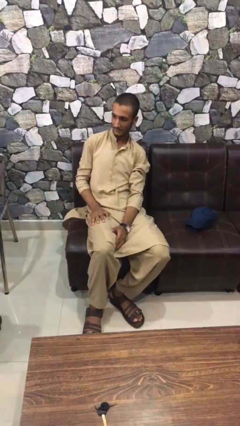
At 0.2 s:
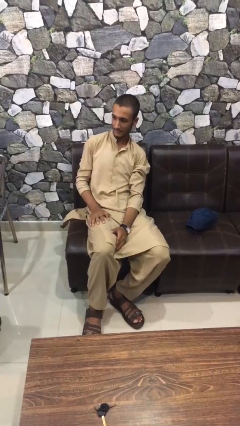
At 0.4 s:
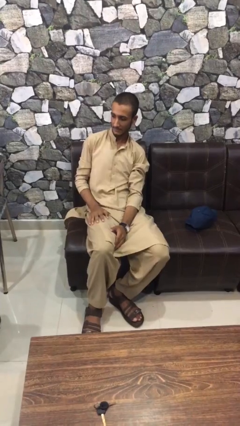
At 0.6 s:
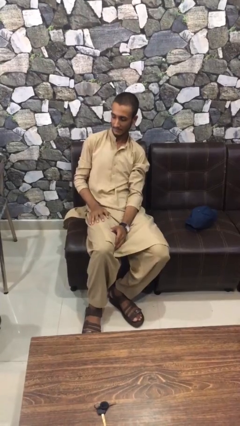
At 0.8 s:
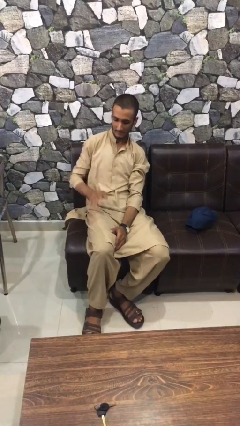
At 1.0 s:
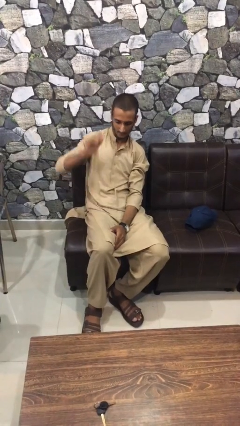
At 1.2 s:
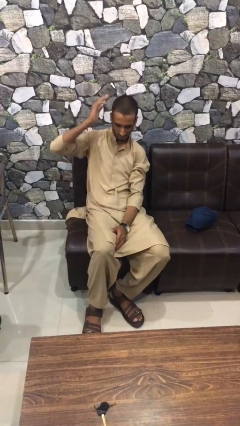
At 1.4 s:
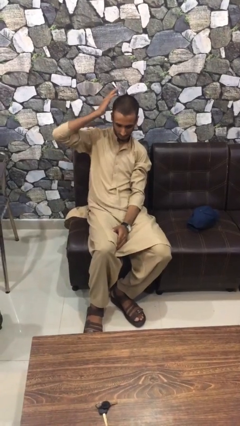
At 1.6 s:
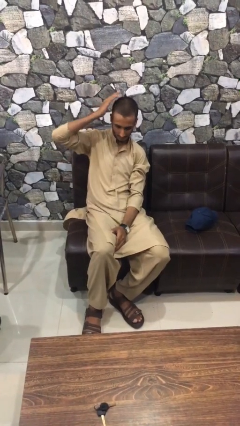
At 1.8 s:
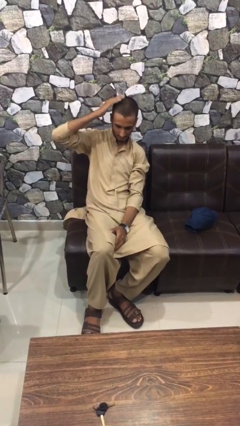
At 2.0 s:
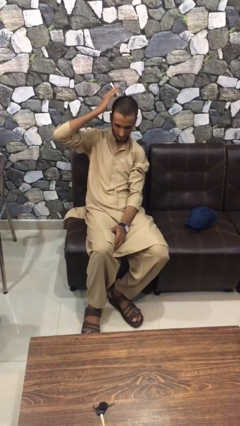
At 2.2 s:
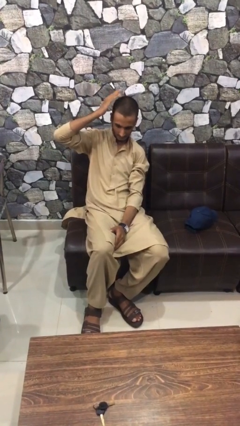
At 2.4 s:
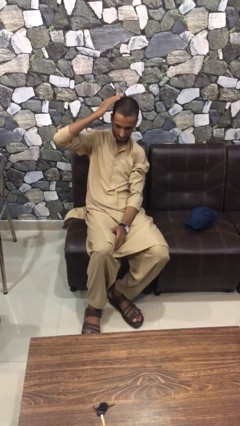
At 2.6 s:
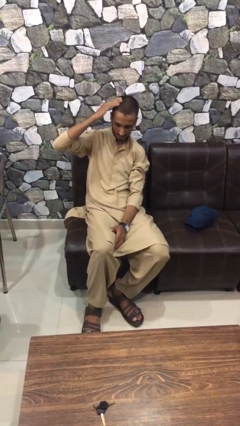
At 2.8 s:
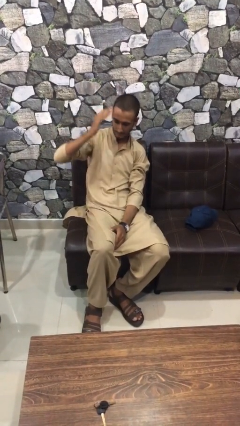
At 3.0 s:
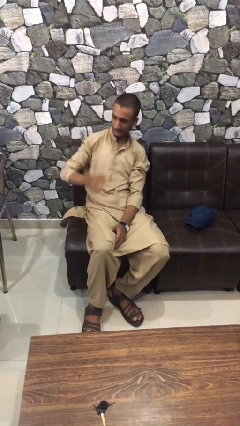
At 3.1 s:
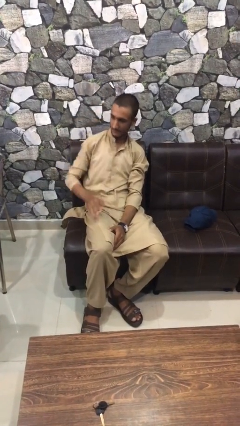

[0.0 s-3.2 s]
person pats head

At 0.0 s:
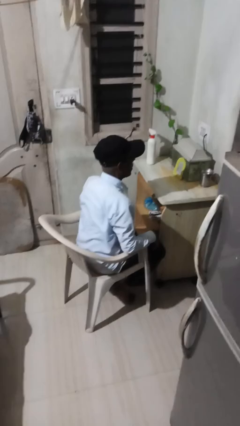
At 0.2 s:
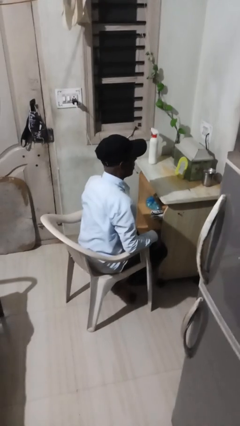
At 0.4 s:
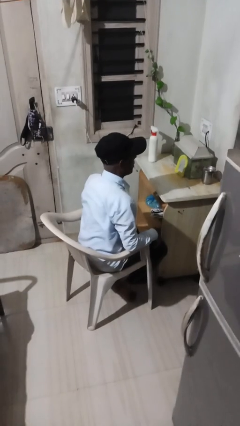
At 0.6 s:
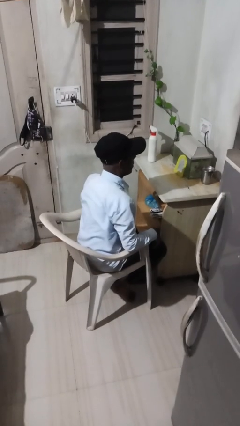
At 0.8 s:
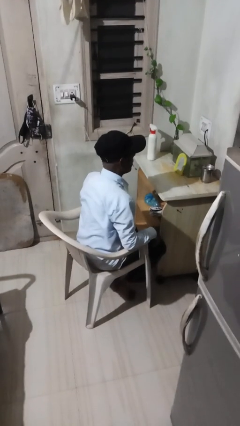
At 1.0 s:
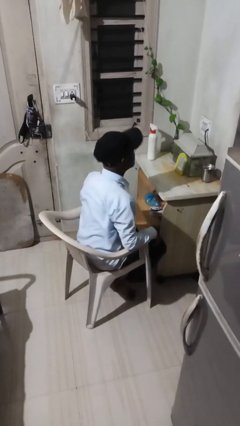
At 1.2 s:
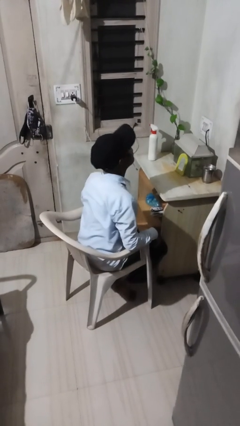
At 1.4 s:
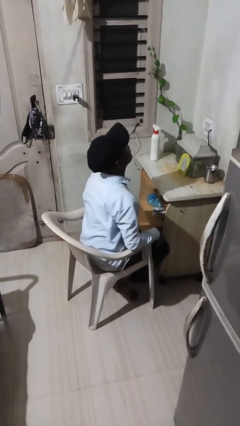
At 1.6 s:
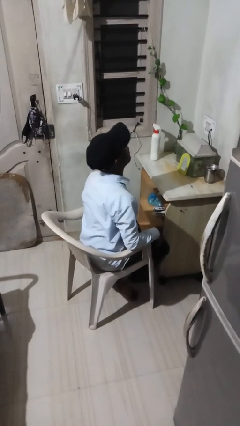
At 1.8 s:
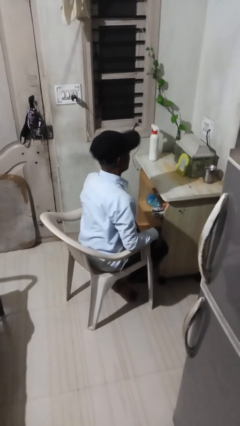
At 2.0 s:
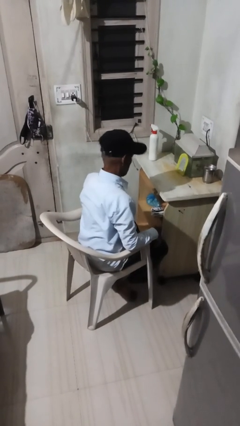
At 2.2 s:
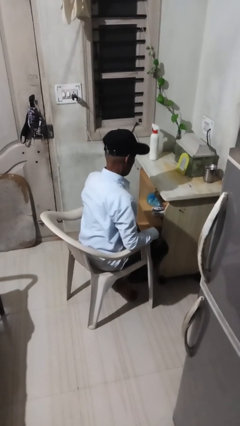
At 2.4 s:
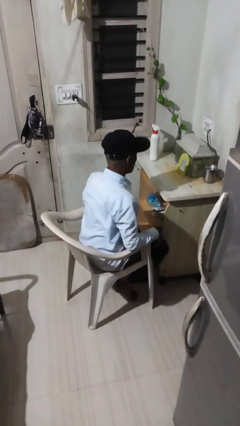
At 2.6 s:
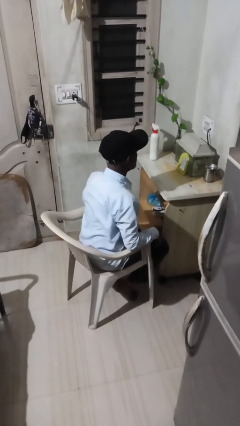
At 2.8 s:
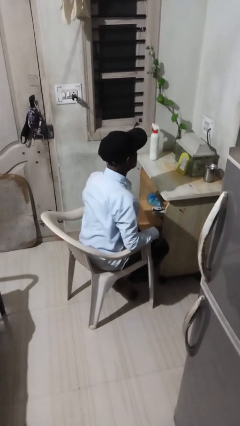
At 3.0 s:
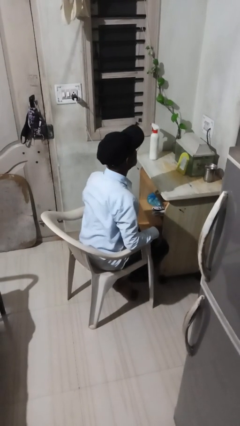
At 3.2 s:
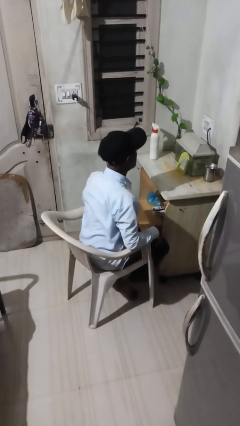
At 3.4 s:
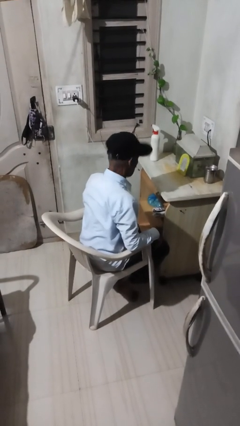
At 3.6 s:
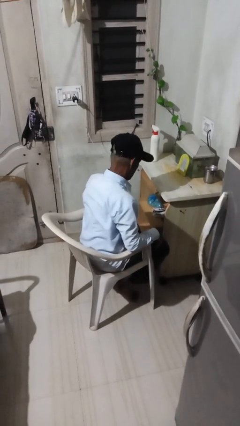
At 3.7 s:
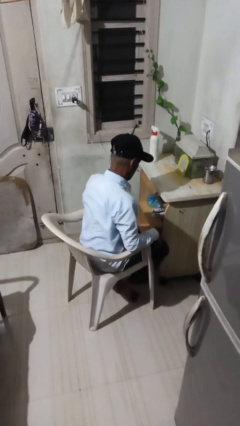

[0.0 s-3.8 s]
person nods head

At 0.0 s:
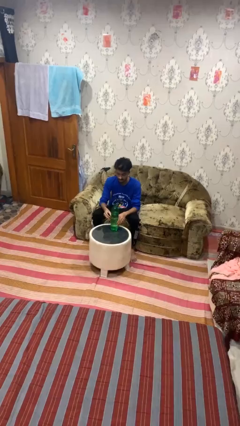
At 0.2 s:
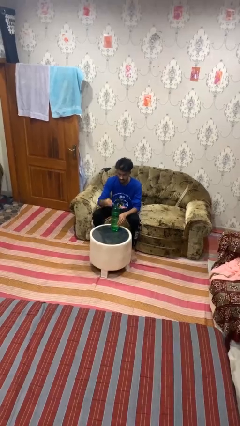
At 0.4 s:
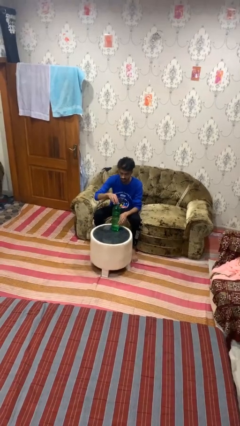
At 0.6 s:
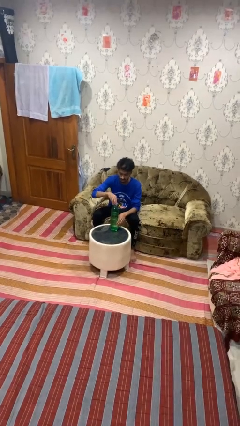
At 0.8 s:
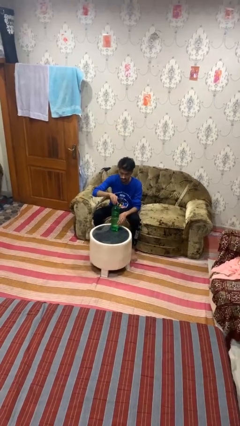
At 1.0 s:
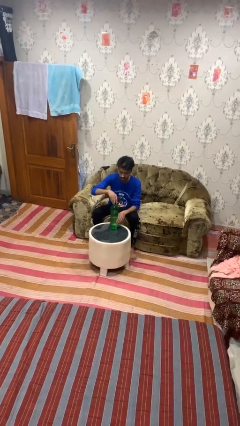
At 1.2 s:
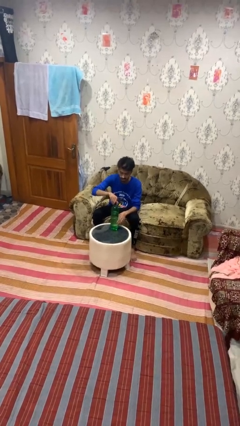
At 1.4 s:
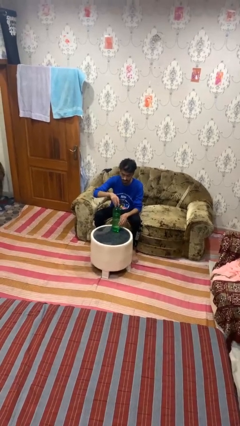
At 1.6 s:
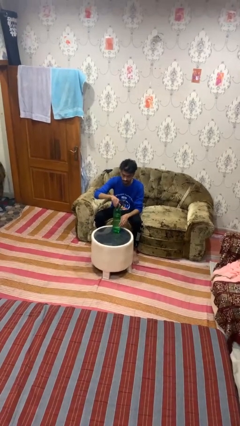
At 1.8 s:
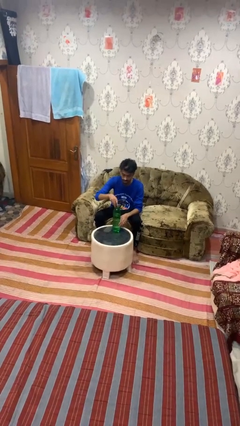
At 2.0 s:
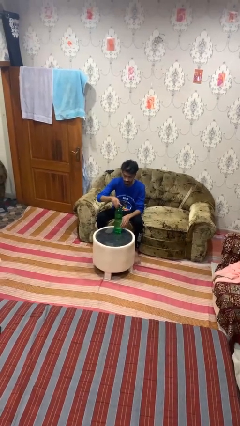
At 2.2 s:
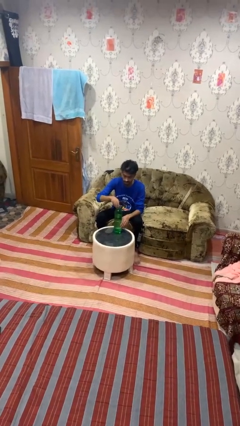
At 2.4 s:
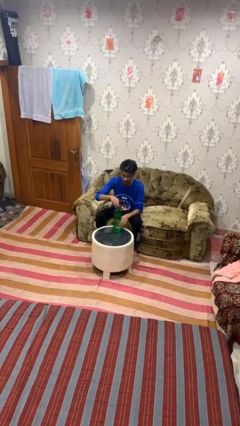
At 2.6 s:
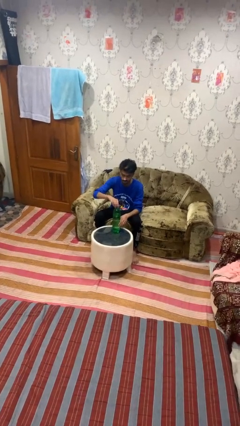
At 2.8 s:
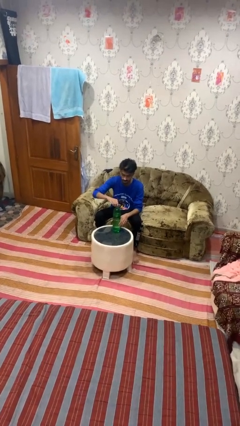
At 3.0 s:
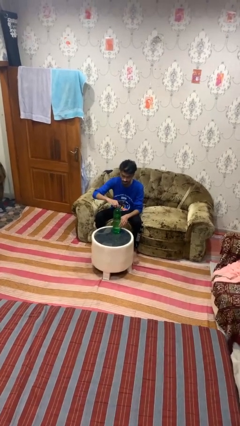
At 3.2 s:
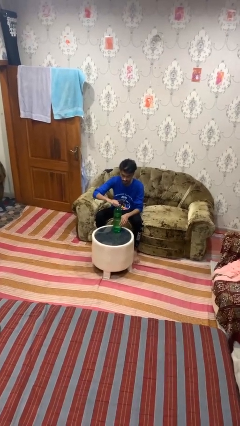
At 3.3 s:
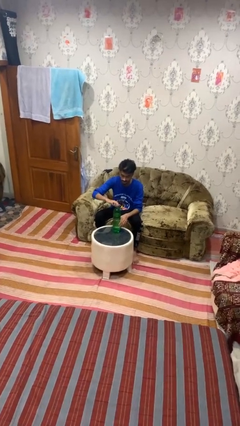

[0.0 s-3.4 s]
person screws lid to bottle

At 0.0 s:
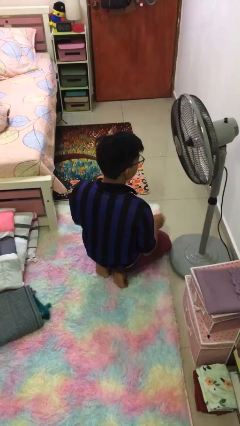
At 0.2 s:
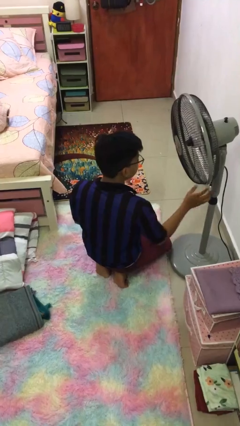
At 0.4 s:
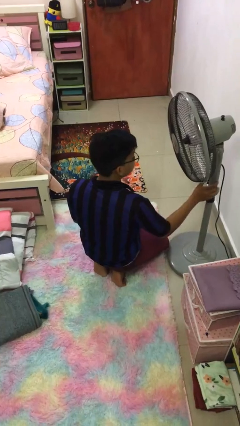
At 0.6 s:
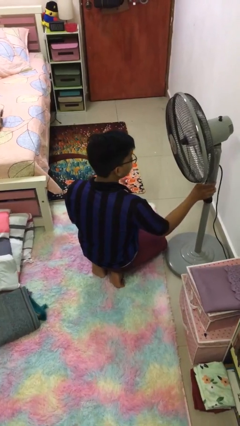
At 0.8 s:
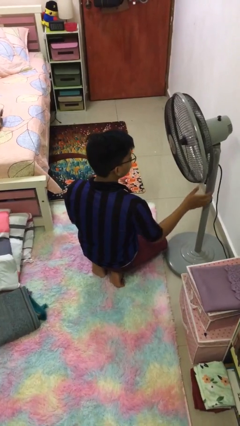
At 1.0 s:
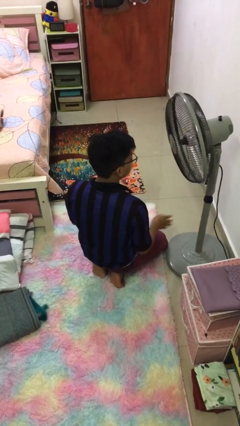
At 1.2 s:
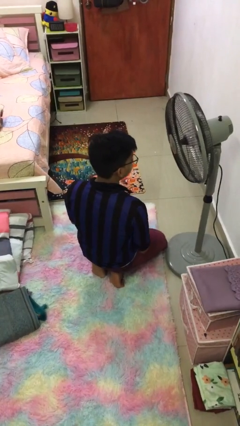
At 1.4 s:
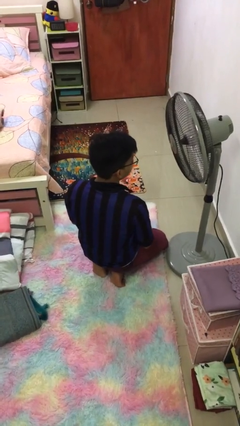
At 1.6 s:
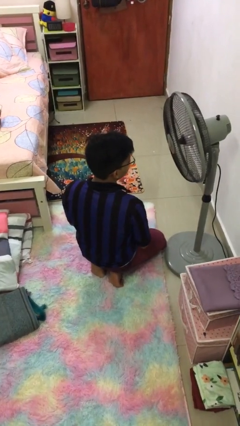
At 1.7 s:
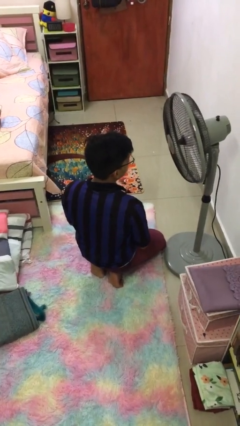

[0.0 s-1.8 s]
person turns on fan

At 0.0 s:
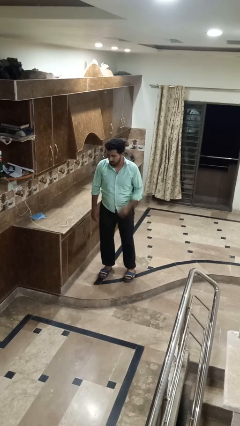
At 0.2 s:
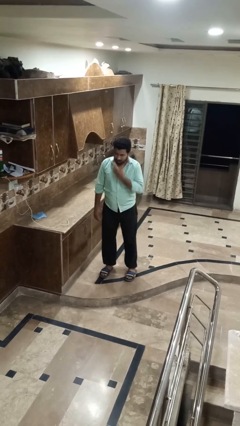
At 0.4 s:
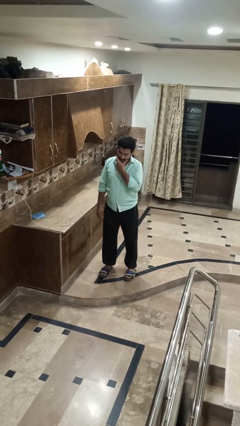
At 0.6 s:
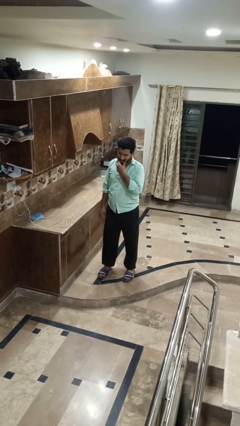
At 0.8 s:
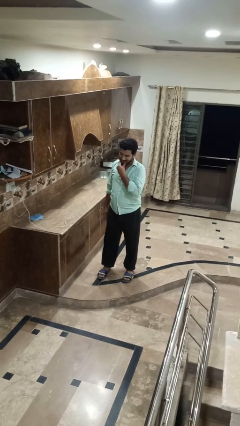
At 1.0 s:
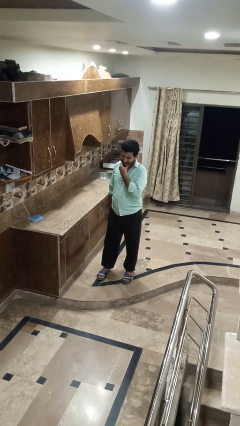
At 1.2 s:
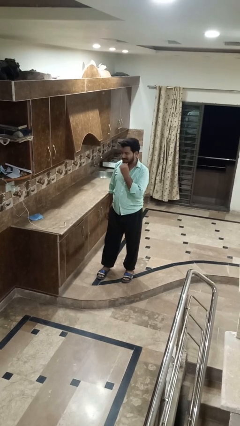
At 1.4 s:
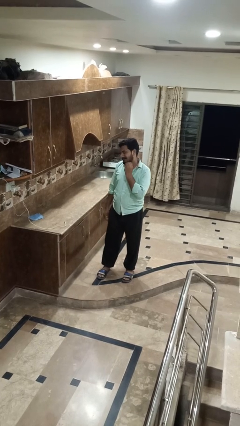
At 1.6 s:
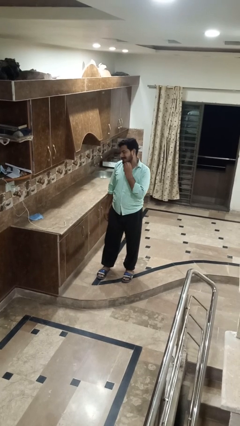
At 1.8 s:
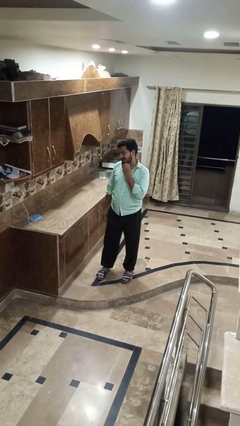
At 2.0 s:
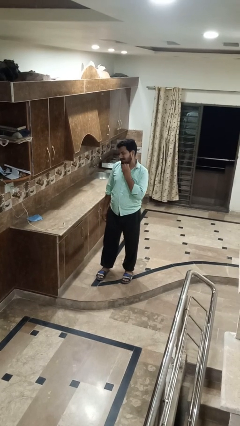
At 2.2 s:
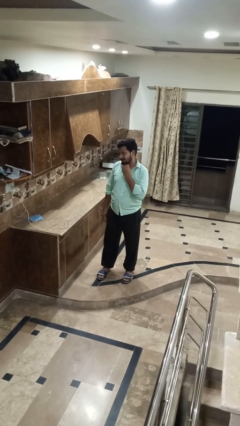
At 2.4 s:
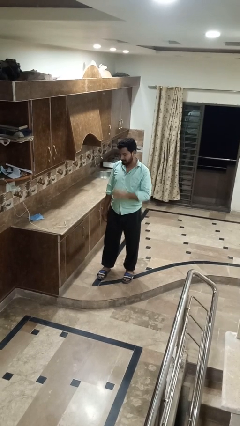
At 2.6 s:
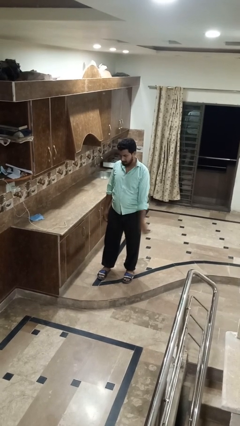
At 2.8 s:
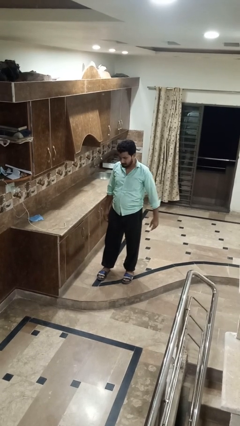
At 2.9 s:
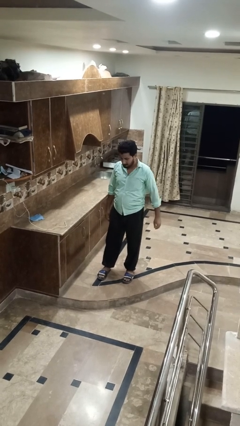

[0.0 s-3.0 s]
person strokes chin

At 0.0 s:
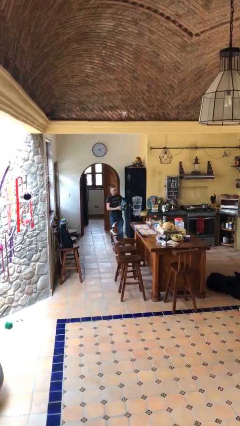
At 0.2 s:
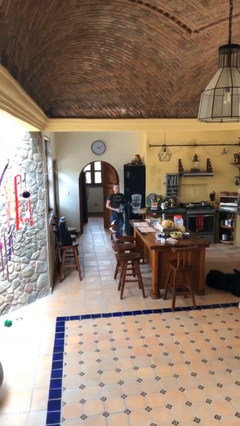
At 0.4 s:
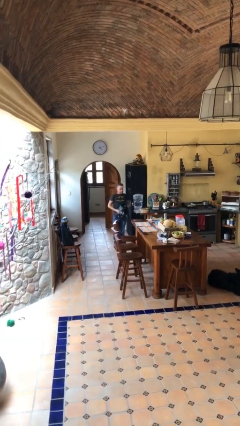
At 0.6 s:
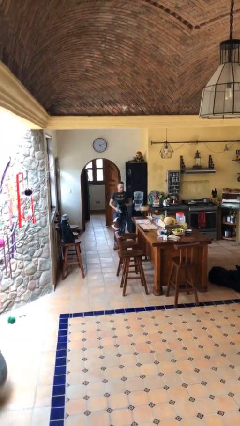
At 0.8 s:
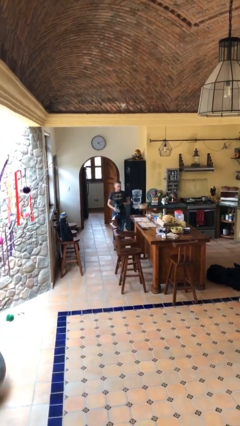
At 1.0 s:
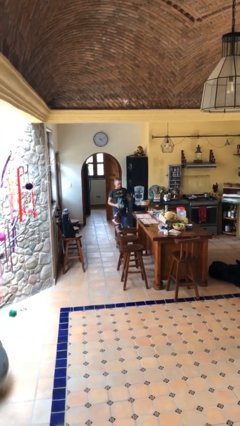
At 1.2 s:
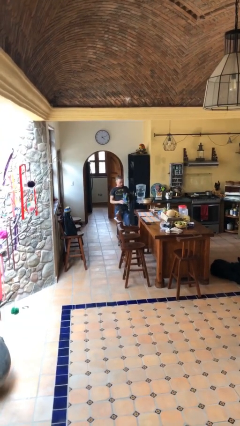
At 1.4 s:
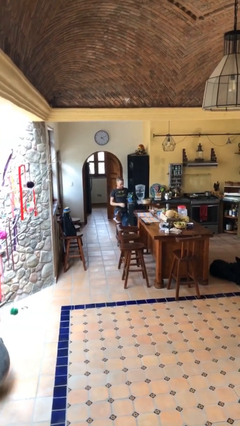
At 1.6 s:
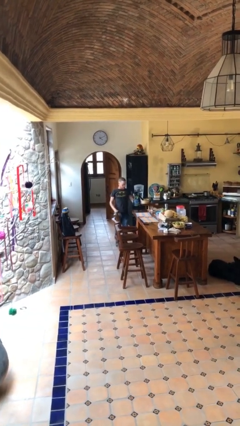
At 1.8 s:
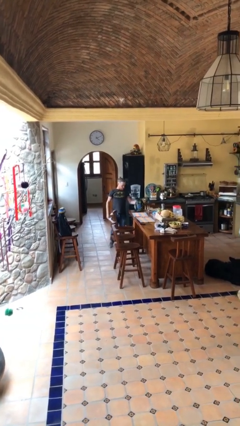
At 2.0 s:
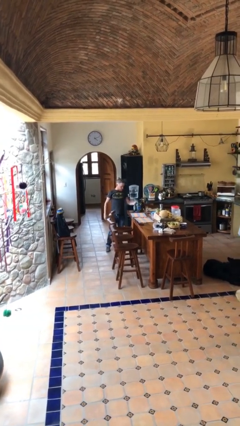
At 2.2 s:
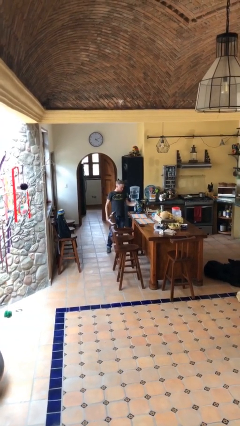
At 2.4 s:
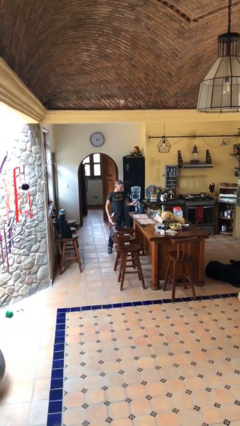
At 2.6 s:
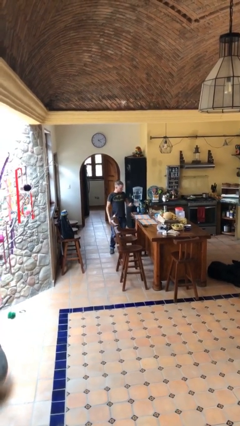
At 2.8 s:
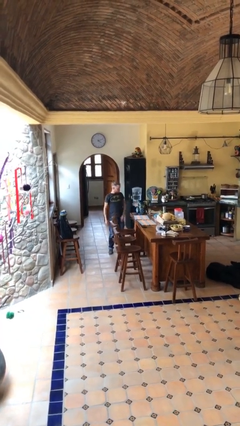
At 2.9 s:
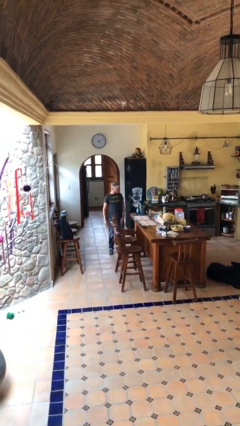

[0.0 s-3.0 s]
person puts down object on table
